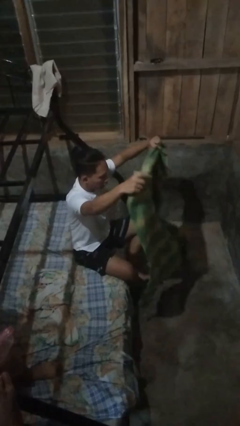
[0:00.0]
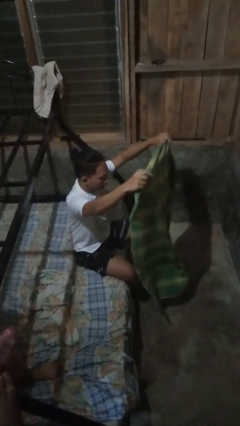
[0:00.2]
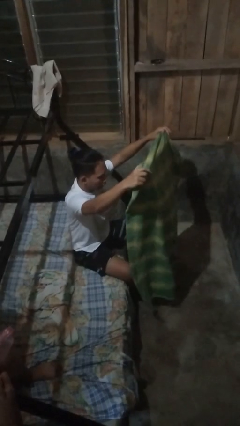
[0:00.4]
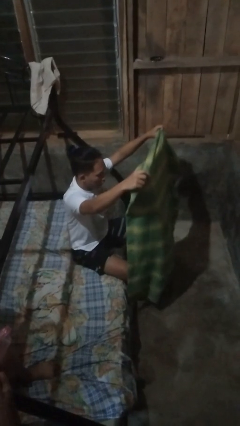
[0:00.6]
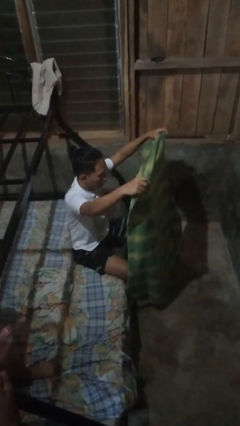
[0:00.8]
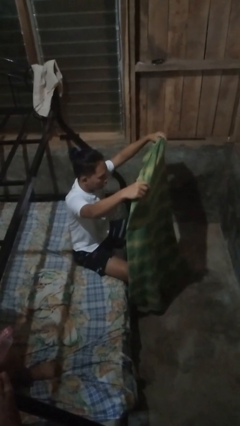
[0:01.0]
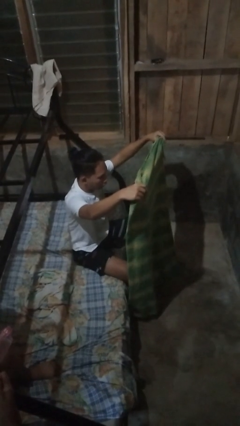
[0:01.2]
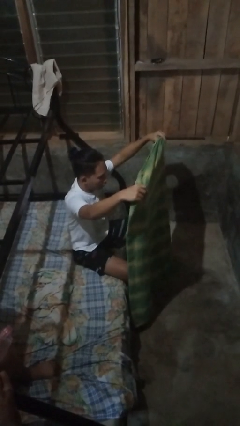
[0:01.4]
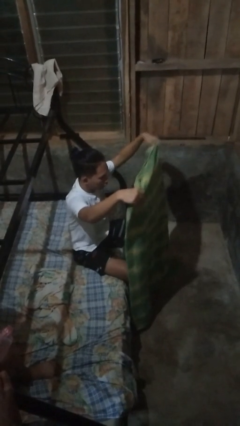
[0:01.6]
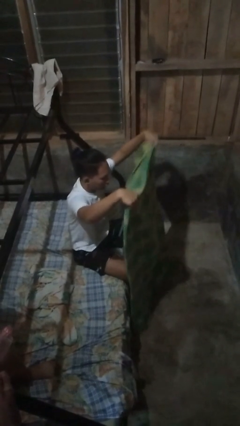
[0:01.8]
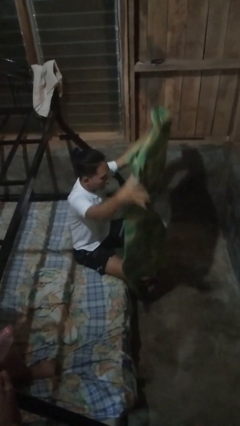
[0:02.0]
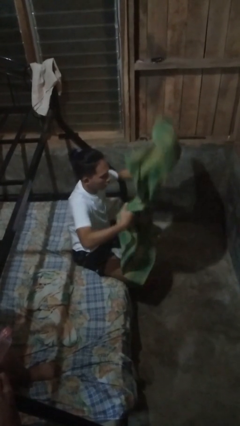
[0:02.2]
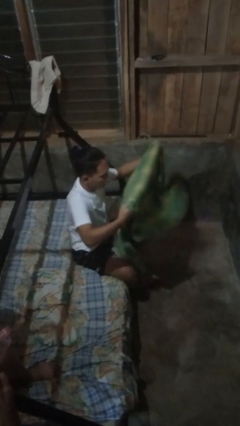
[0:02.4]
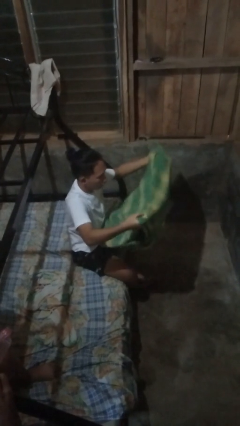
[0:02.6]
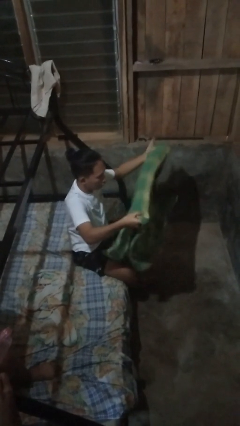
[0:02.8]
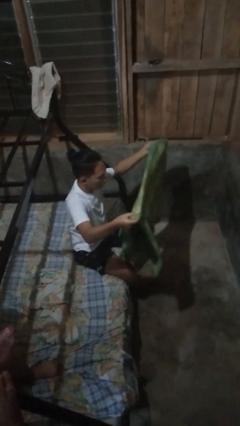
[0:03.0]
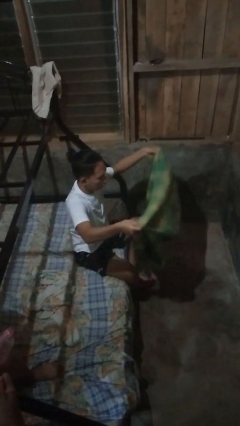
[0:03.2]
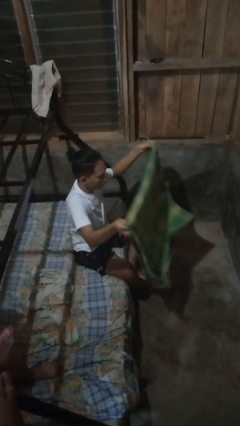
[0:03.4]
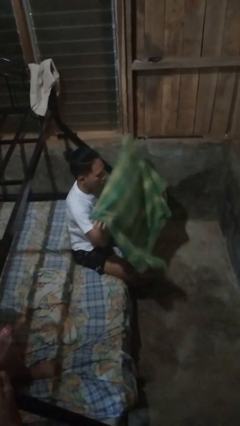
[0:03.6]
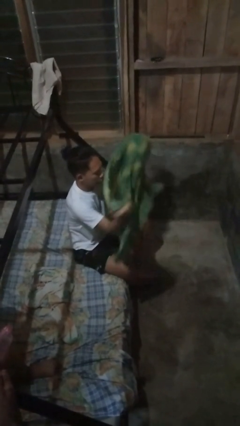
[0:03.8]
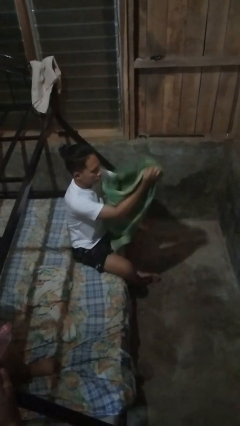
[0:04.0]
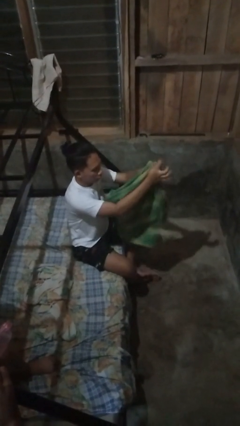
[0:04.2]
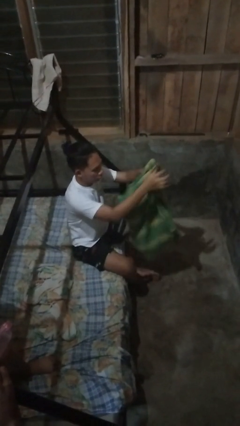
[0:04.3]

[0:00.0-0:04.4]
person folds blanket

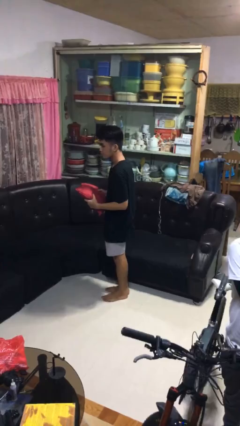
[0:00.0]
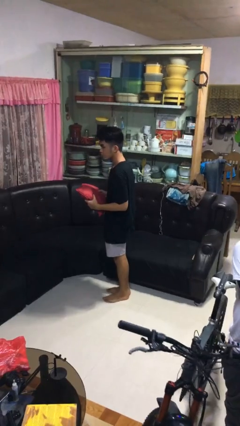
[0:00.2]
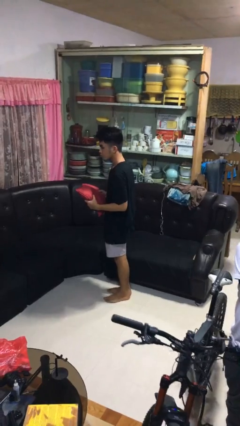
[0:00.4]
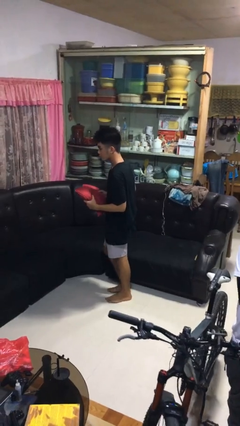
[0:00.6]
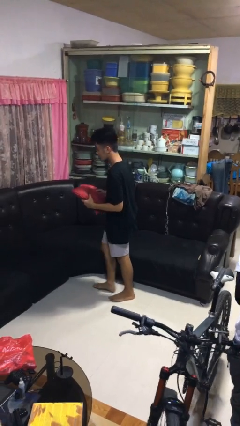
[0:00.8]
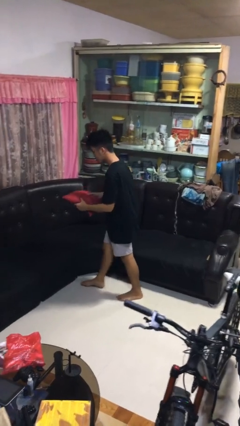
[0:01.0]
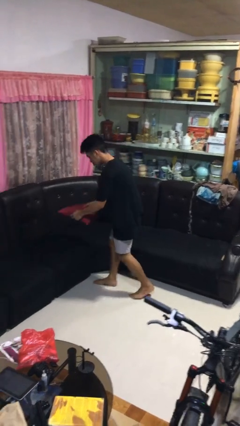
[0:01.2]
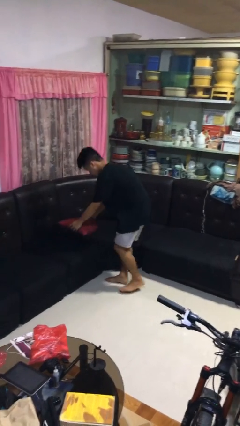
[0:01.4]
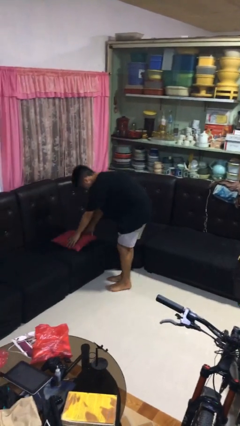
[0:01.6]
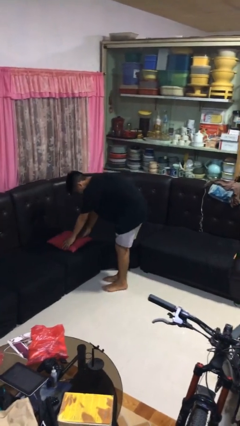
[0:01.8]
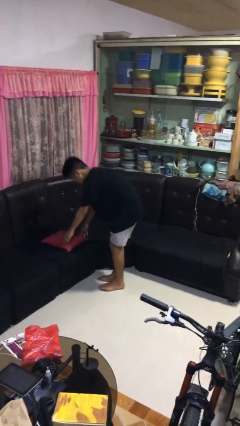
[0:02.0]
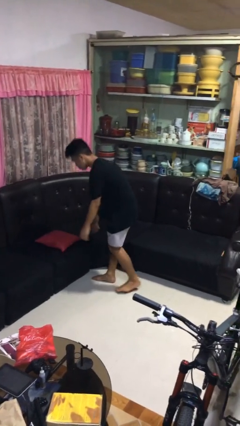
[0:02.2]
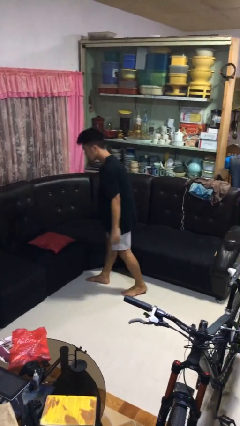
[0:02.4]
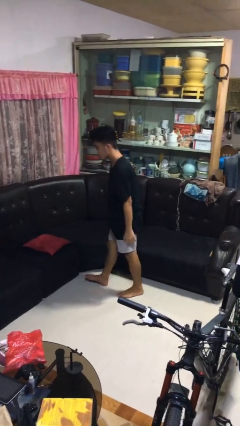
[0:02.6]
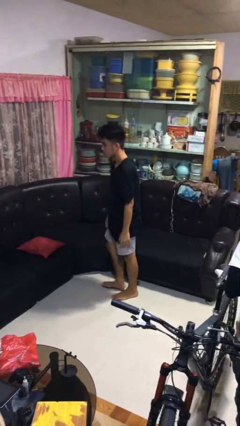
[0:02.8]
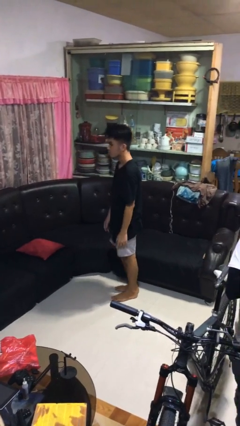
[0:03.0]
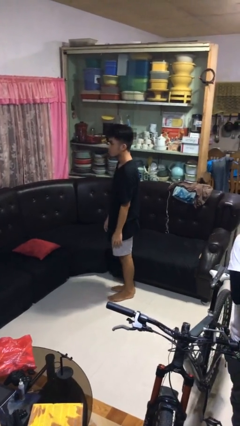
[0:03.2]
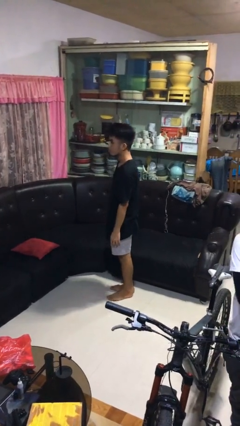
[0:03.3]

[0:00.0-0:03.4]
person puts down object on couch

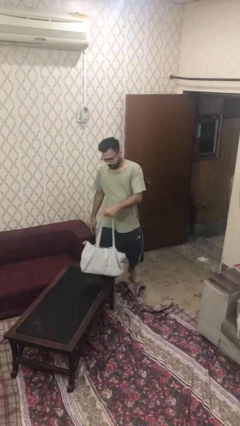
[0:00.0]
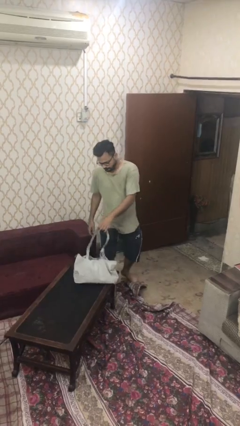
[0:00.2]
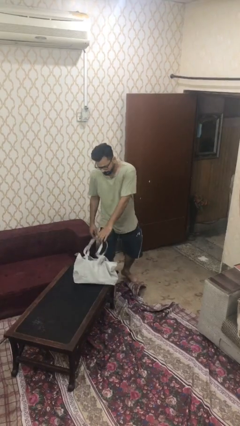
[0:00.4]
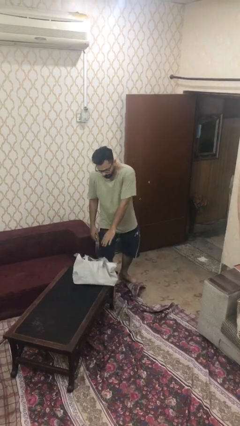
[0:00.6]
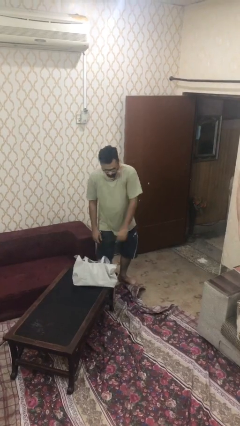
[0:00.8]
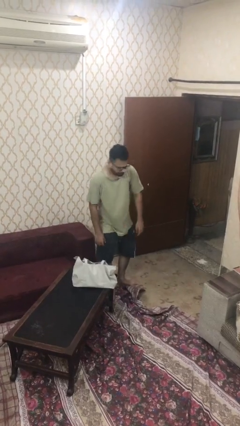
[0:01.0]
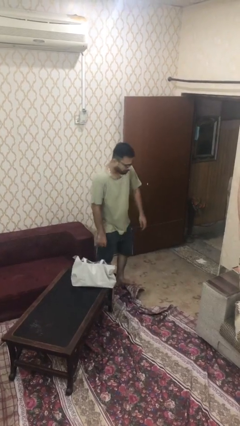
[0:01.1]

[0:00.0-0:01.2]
person puts down object on table

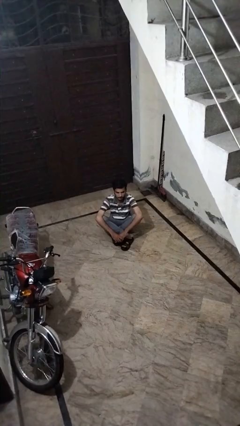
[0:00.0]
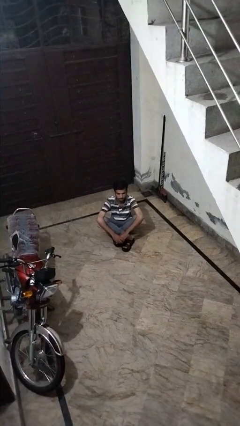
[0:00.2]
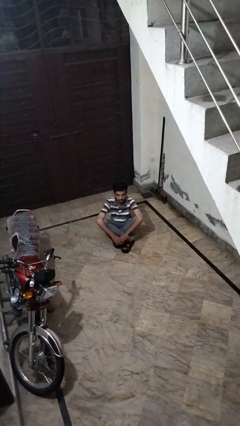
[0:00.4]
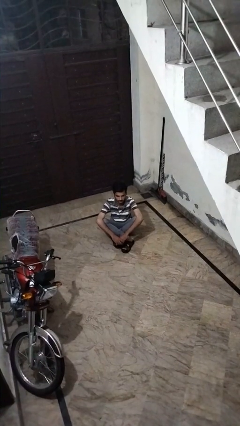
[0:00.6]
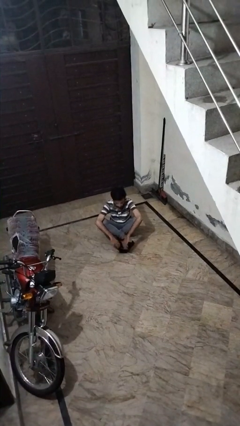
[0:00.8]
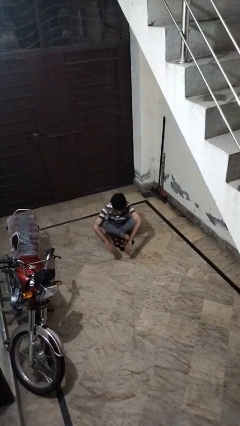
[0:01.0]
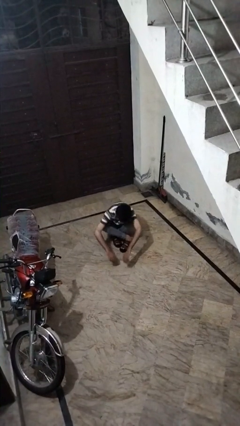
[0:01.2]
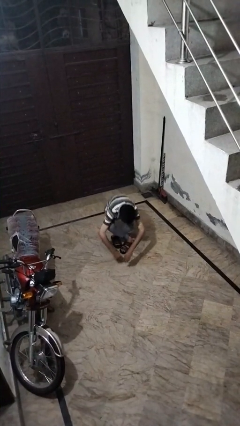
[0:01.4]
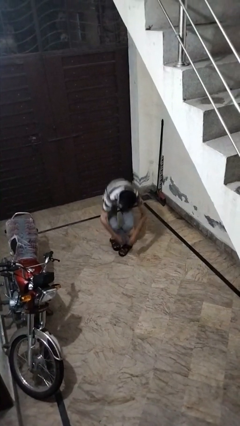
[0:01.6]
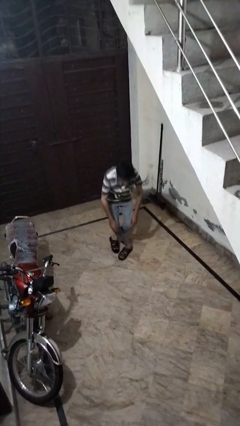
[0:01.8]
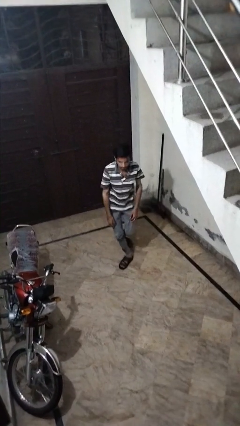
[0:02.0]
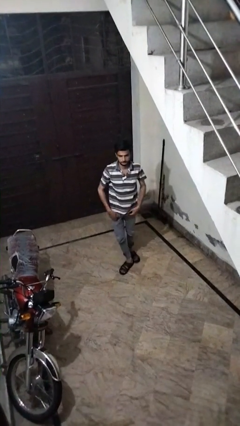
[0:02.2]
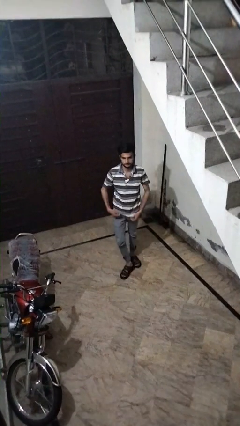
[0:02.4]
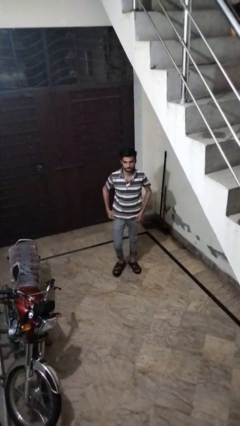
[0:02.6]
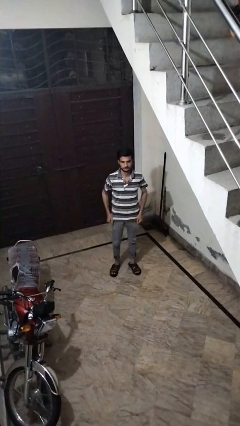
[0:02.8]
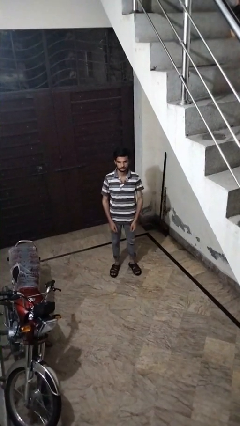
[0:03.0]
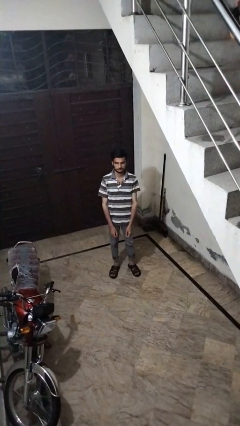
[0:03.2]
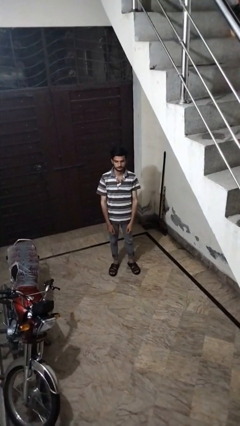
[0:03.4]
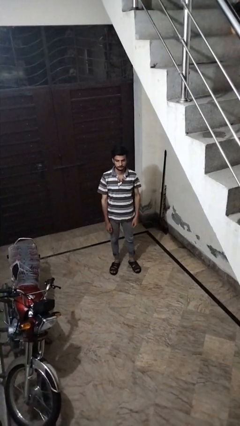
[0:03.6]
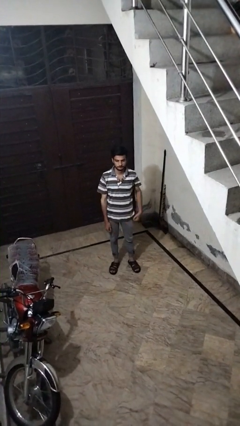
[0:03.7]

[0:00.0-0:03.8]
person stands up from floor

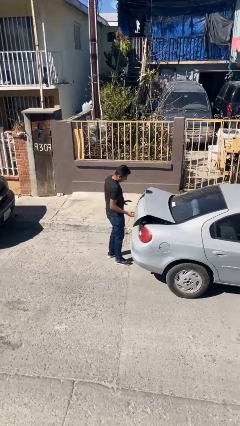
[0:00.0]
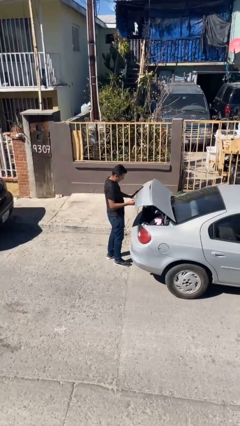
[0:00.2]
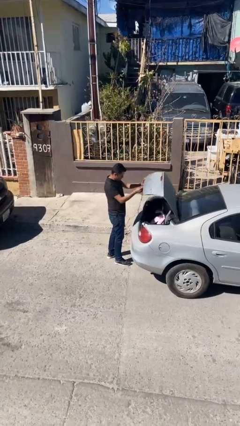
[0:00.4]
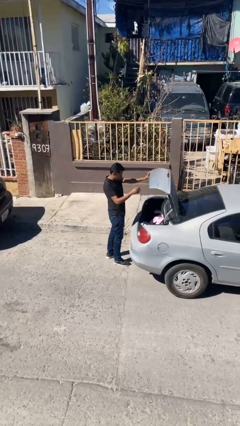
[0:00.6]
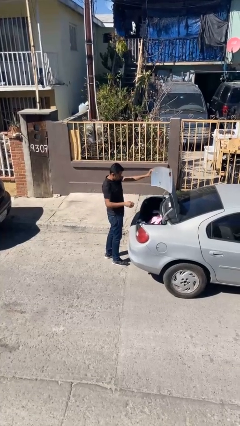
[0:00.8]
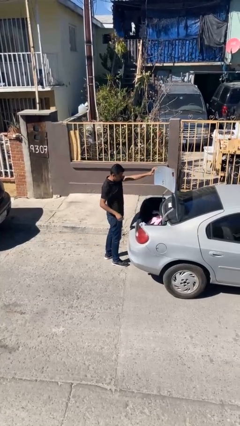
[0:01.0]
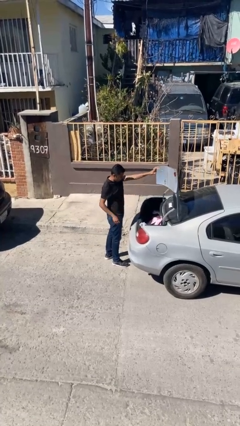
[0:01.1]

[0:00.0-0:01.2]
person opens car trunk

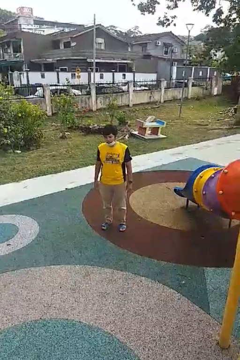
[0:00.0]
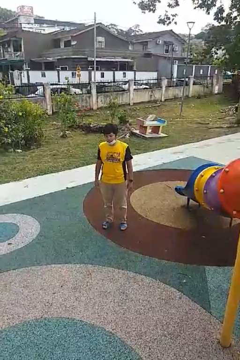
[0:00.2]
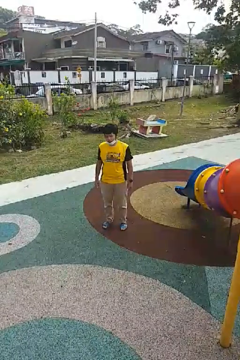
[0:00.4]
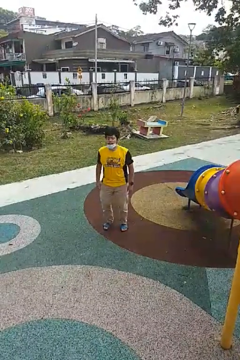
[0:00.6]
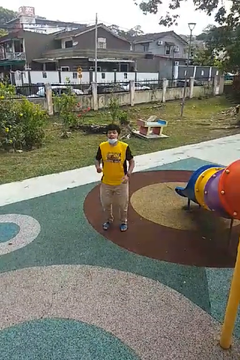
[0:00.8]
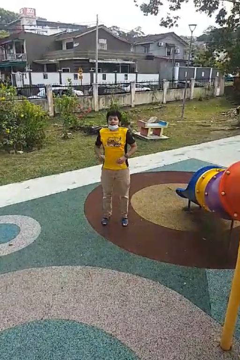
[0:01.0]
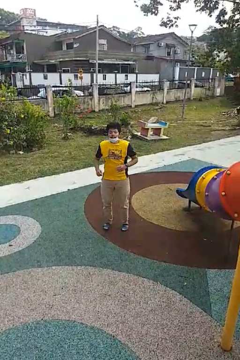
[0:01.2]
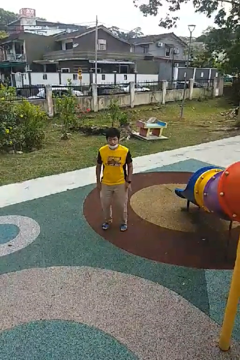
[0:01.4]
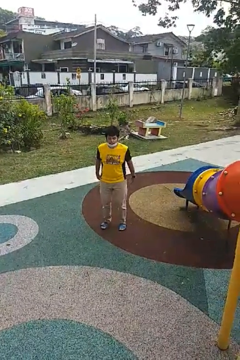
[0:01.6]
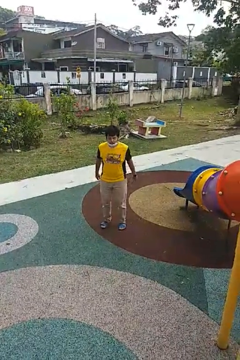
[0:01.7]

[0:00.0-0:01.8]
person jumps

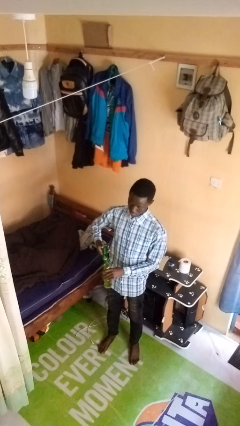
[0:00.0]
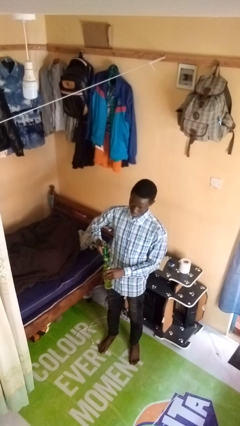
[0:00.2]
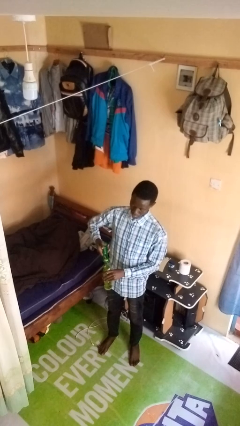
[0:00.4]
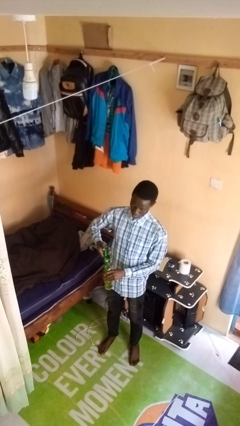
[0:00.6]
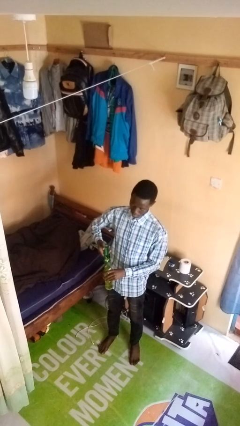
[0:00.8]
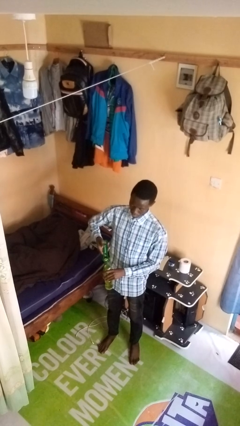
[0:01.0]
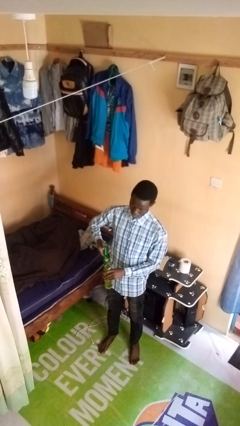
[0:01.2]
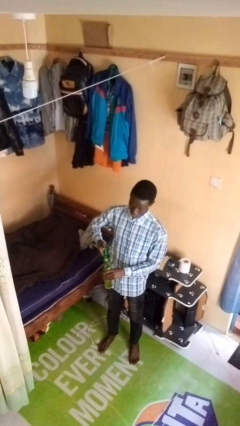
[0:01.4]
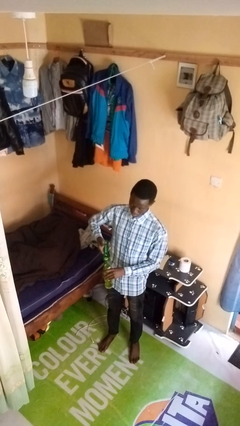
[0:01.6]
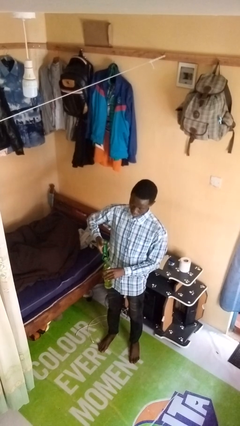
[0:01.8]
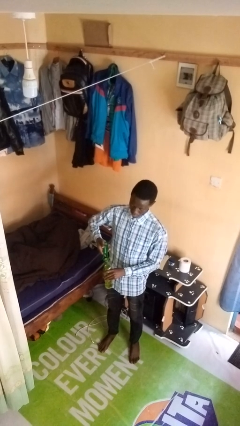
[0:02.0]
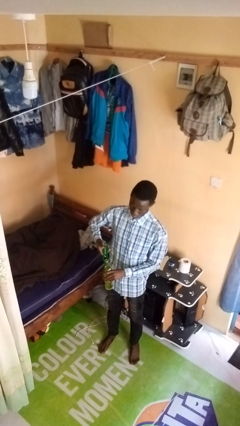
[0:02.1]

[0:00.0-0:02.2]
person opens can with can opener
